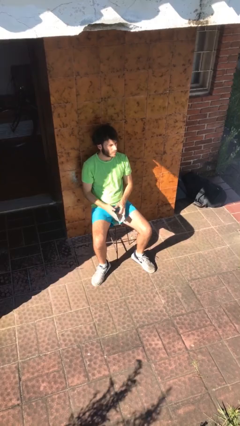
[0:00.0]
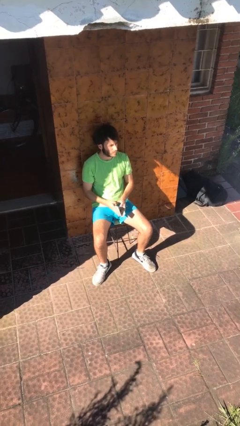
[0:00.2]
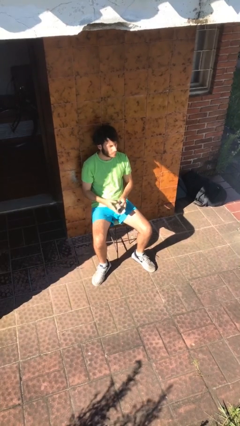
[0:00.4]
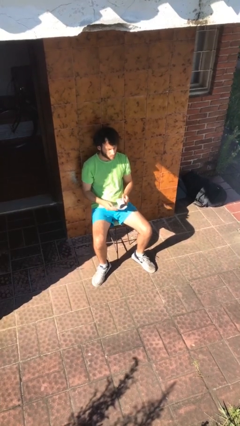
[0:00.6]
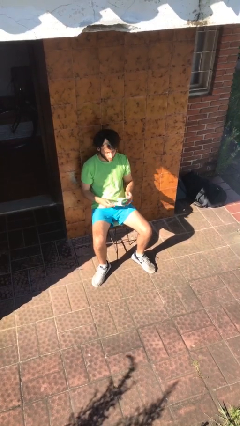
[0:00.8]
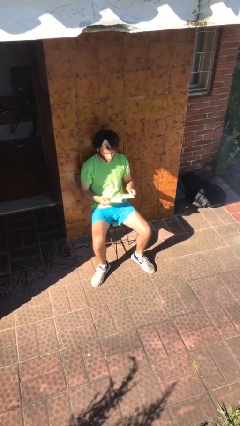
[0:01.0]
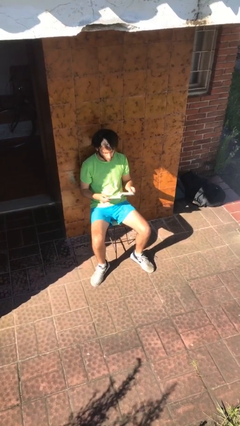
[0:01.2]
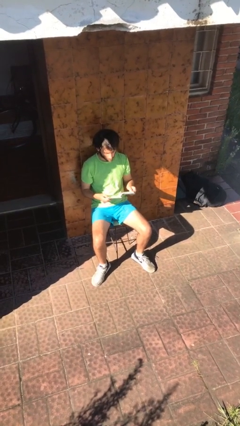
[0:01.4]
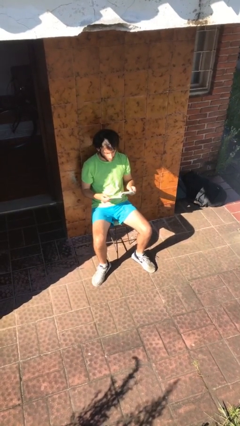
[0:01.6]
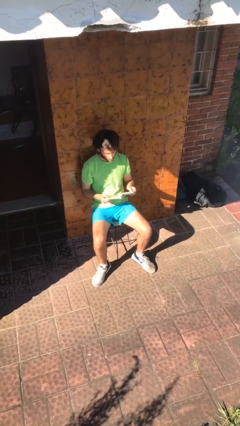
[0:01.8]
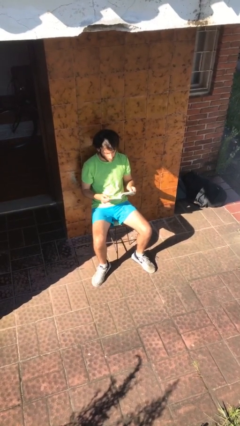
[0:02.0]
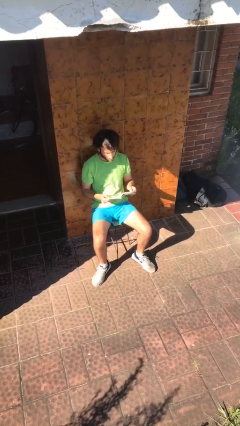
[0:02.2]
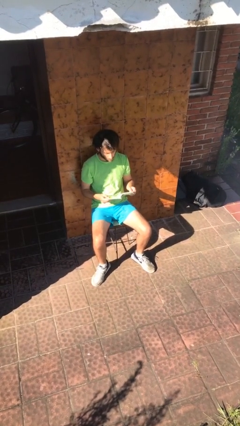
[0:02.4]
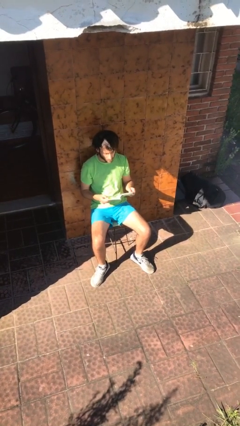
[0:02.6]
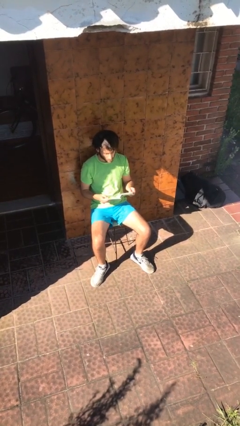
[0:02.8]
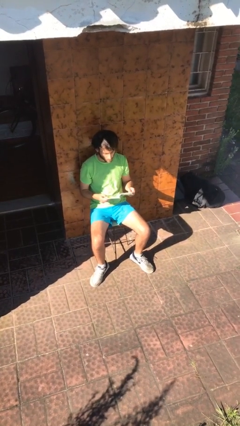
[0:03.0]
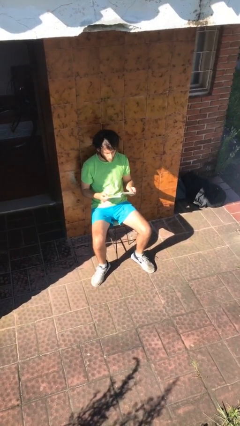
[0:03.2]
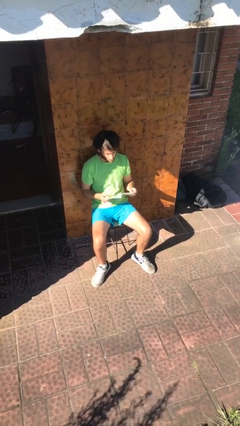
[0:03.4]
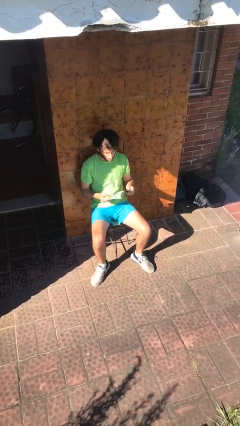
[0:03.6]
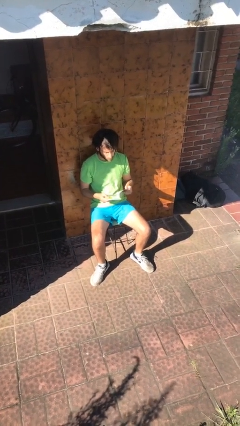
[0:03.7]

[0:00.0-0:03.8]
person reads document

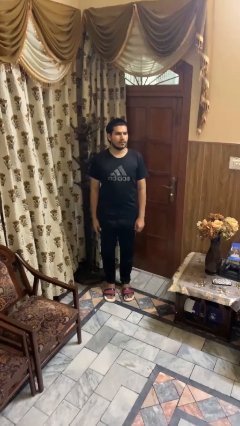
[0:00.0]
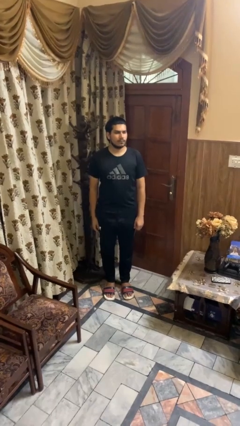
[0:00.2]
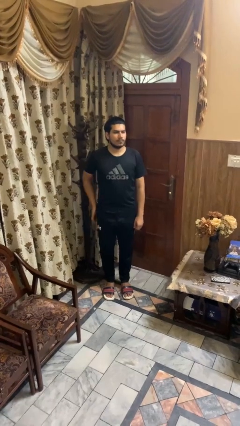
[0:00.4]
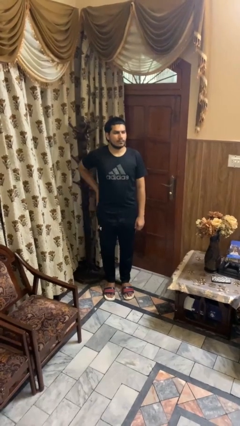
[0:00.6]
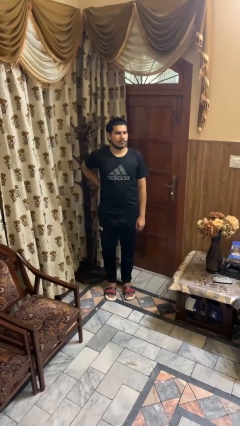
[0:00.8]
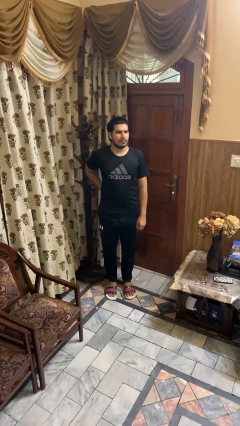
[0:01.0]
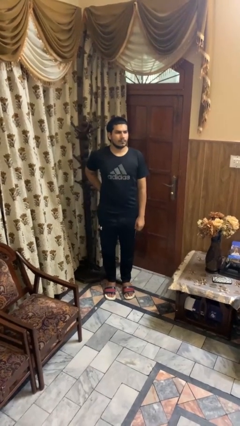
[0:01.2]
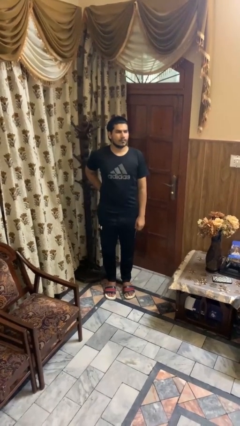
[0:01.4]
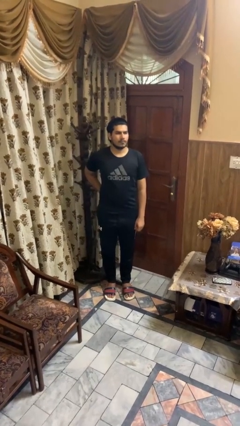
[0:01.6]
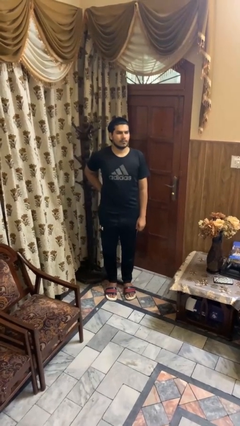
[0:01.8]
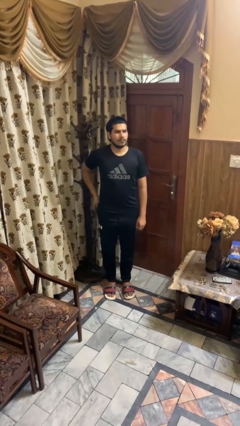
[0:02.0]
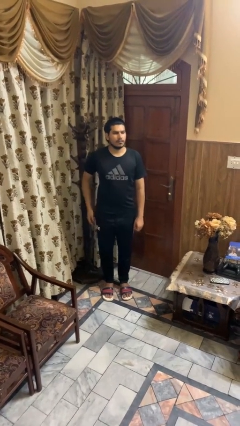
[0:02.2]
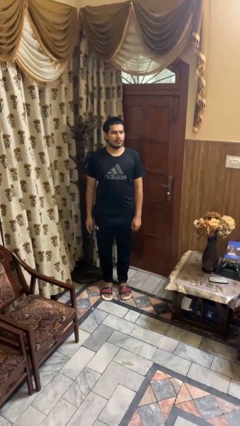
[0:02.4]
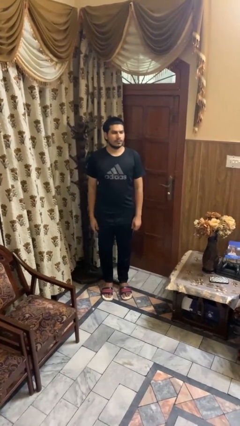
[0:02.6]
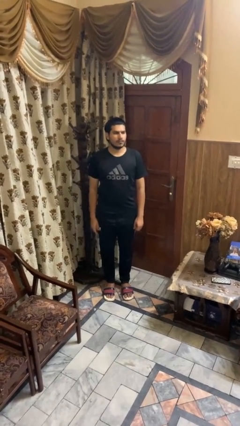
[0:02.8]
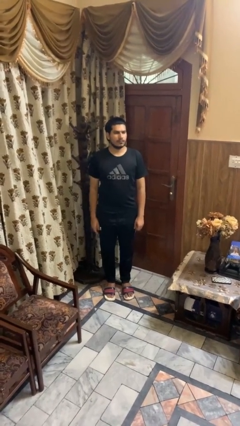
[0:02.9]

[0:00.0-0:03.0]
person puts hands in back pockets

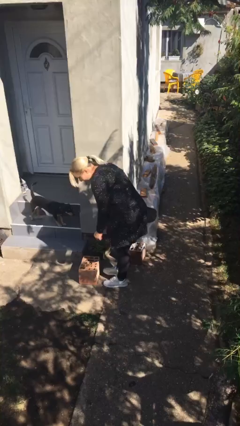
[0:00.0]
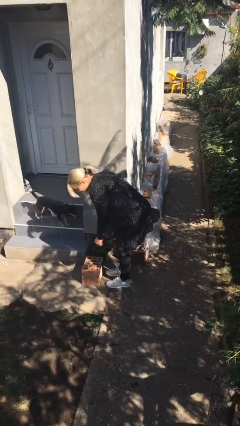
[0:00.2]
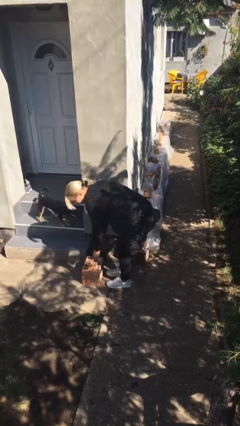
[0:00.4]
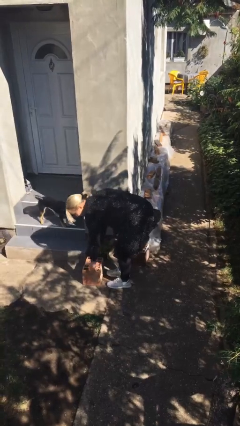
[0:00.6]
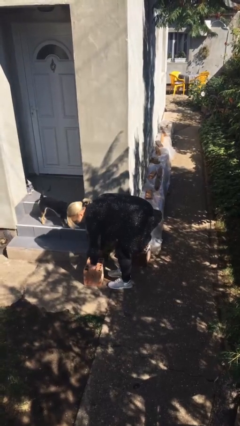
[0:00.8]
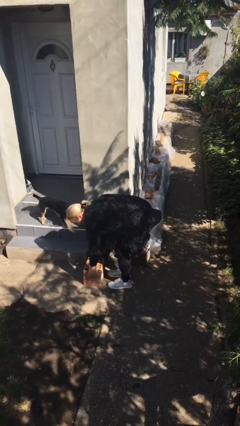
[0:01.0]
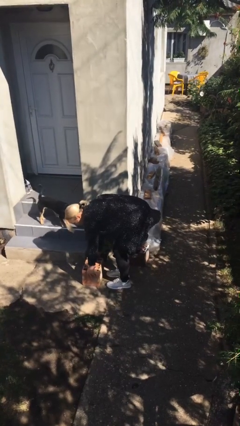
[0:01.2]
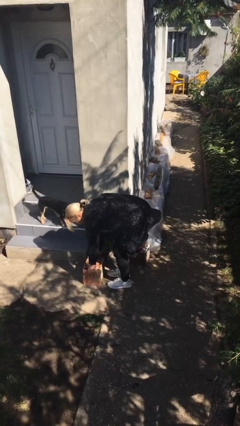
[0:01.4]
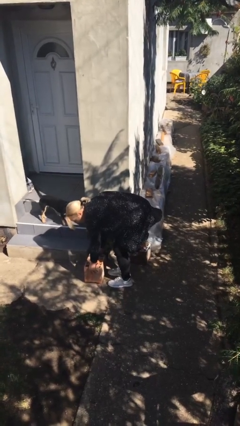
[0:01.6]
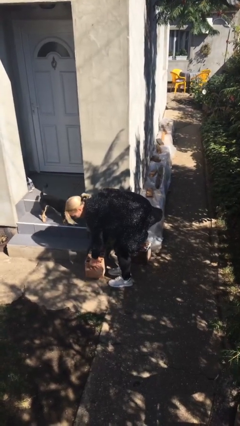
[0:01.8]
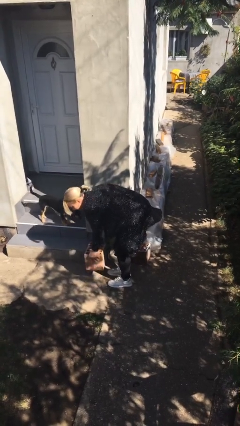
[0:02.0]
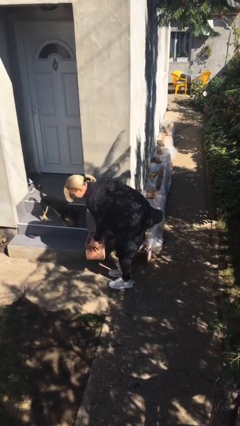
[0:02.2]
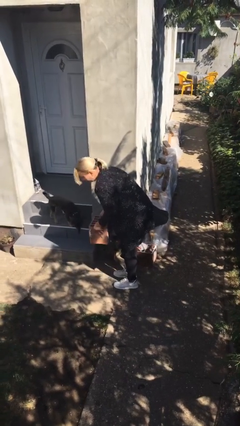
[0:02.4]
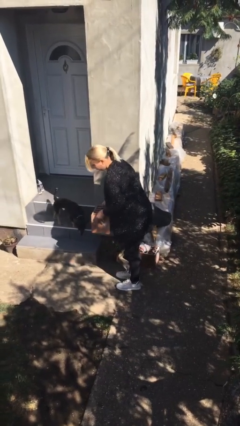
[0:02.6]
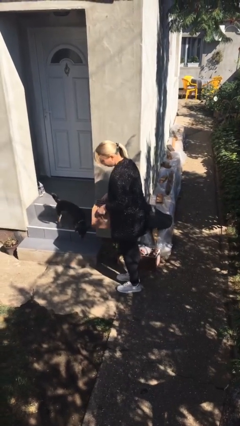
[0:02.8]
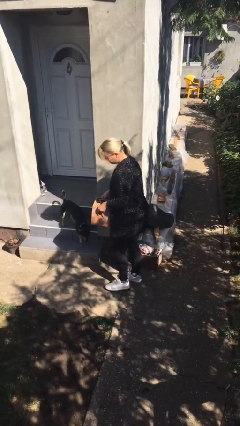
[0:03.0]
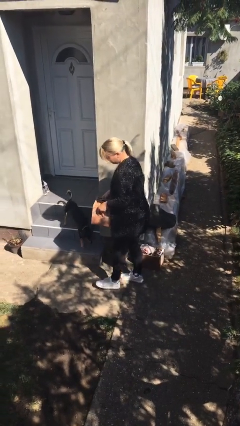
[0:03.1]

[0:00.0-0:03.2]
person picks up object from floor

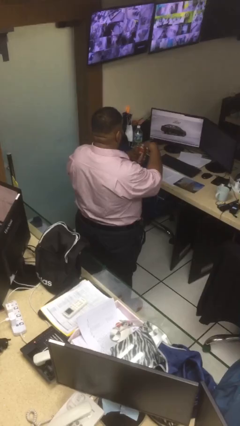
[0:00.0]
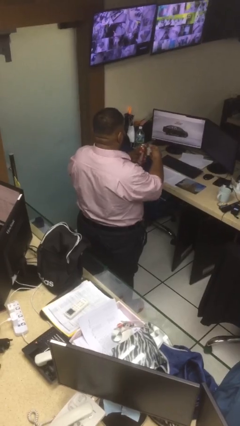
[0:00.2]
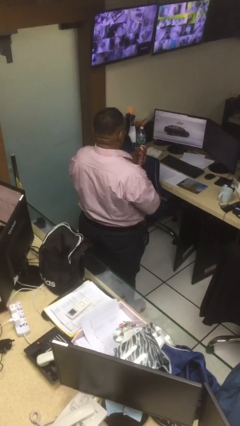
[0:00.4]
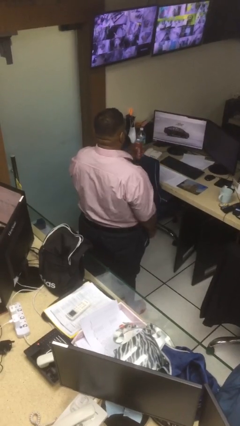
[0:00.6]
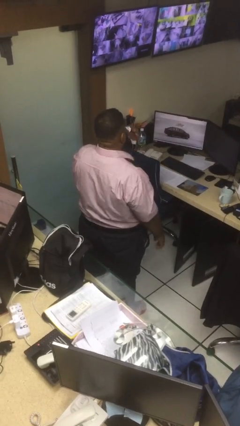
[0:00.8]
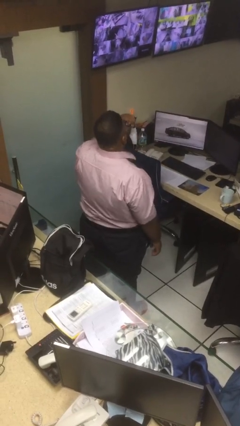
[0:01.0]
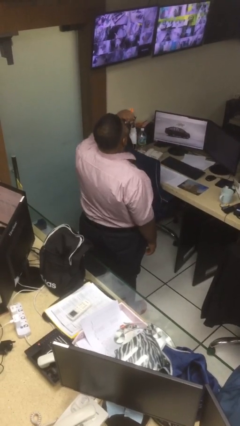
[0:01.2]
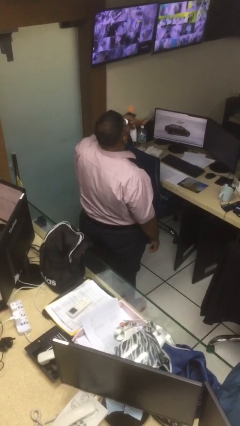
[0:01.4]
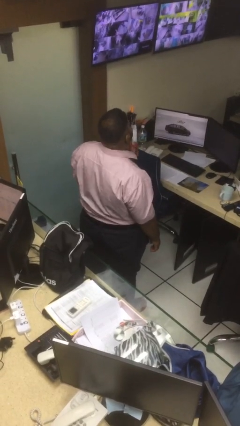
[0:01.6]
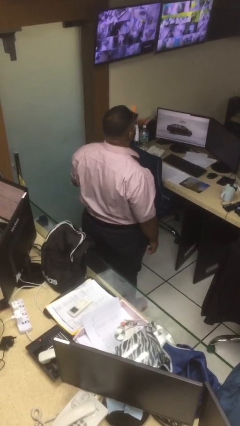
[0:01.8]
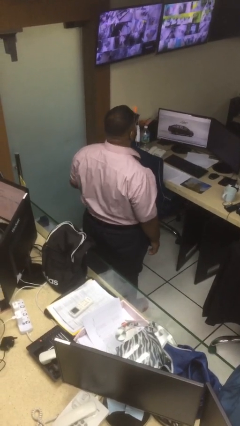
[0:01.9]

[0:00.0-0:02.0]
person drinks from beverage can

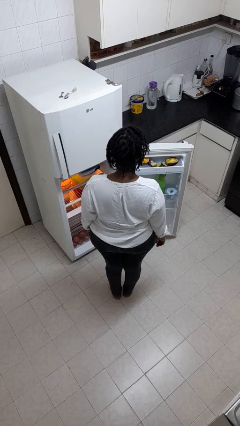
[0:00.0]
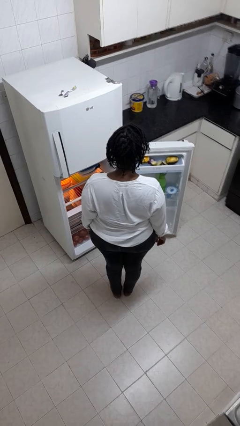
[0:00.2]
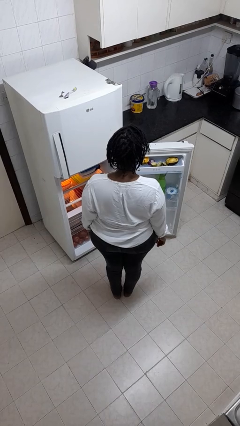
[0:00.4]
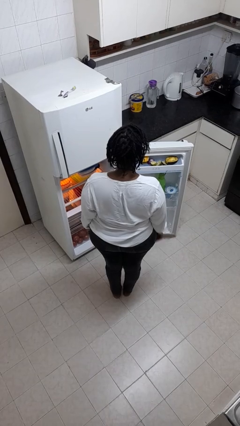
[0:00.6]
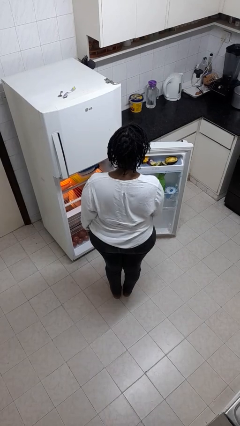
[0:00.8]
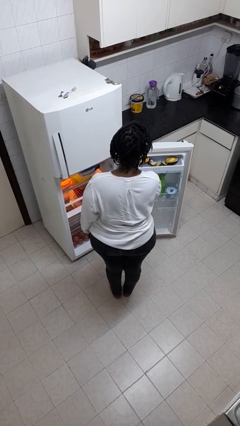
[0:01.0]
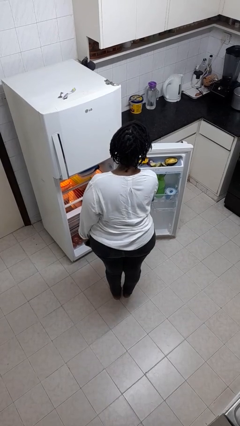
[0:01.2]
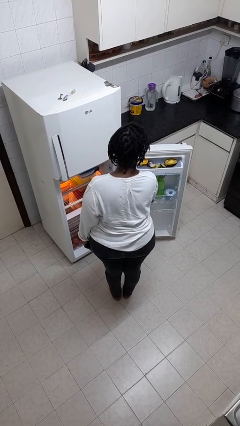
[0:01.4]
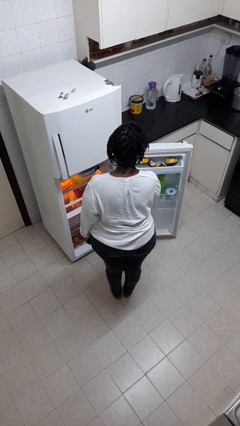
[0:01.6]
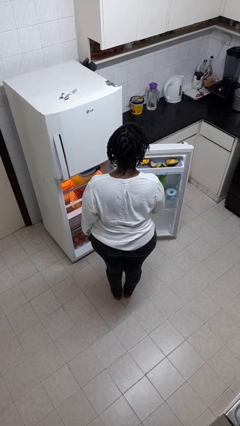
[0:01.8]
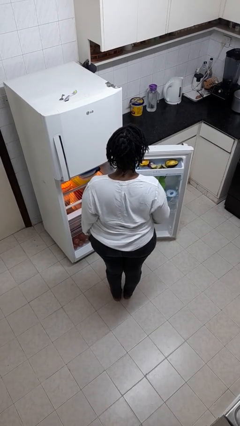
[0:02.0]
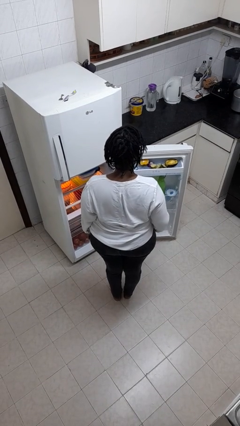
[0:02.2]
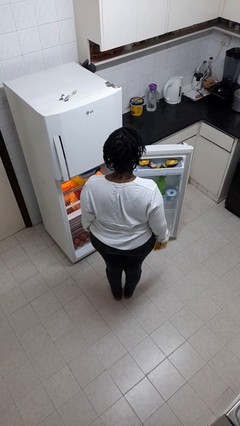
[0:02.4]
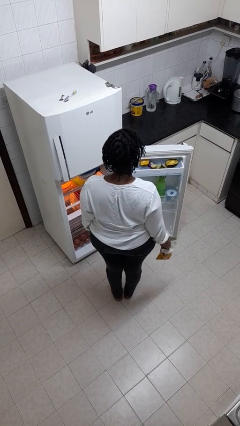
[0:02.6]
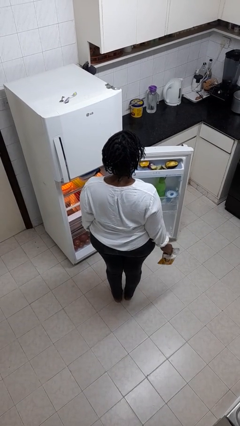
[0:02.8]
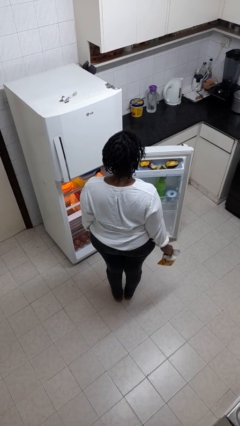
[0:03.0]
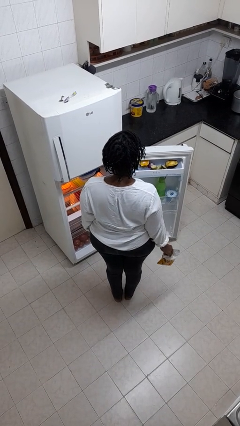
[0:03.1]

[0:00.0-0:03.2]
person takes object from refrigerator

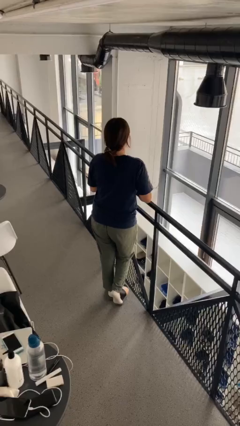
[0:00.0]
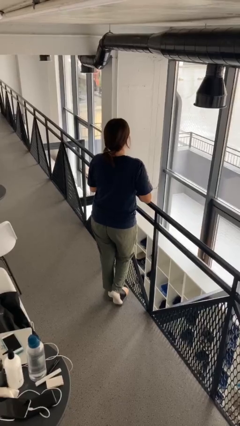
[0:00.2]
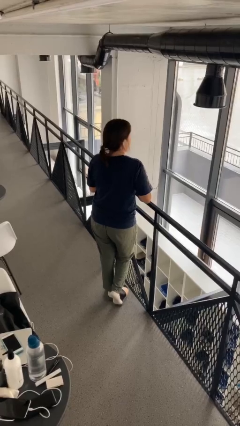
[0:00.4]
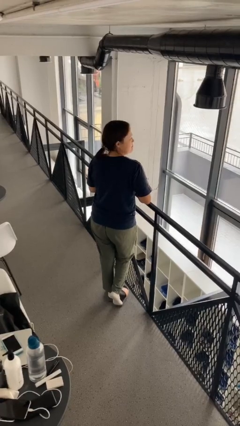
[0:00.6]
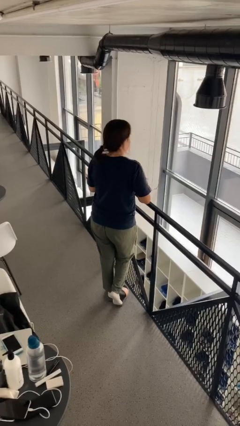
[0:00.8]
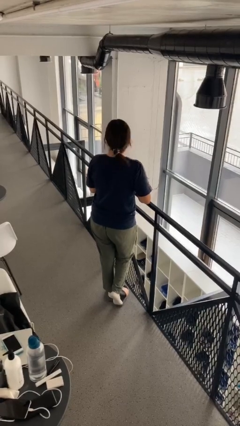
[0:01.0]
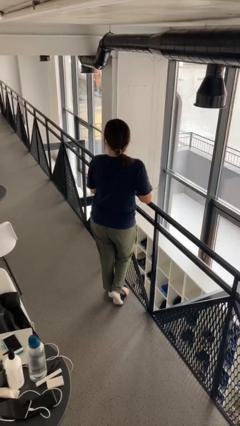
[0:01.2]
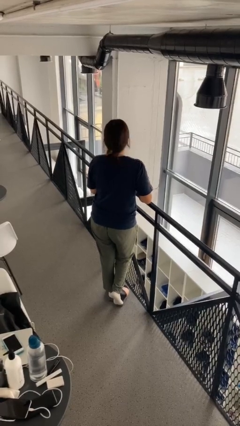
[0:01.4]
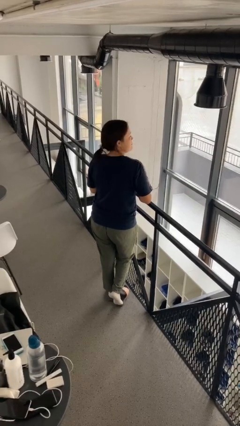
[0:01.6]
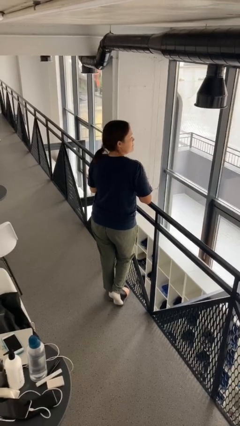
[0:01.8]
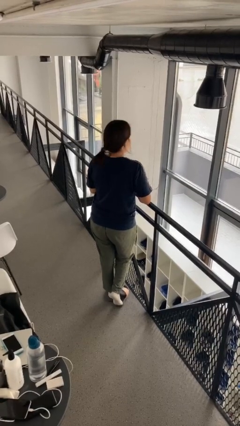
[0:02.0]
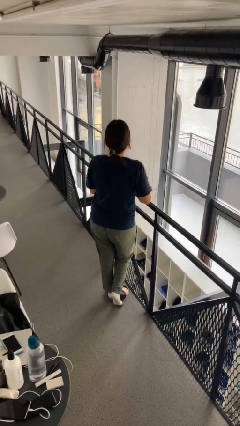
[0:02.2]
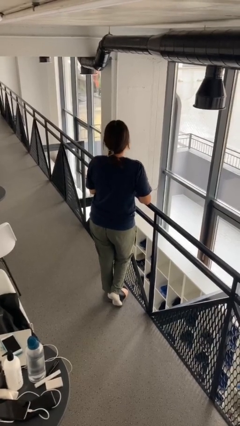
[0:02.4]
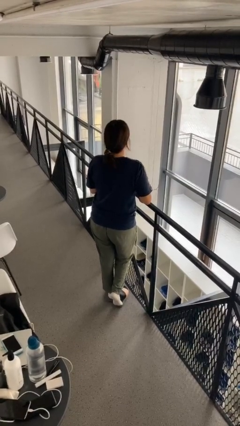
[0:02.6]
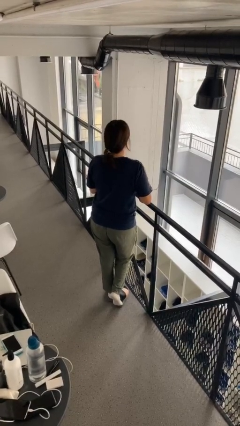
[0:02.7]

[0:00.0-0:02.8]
person shakes head
